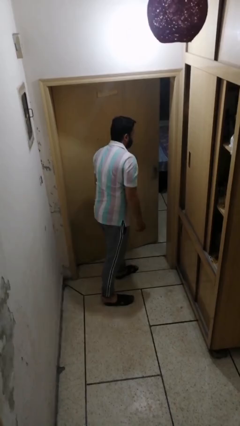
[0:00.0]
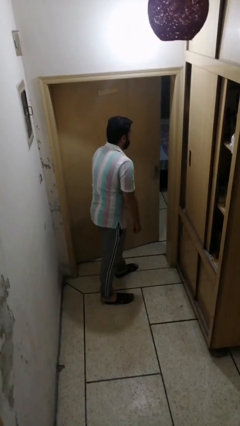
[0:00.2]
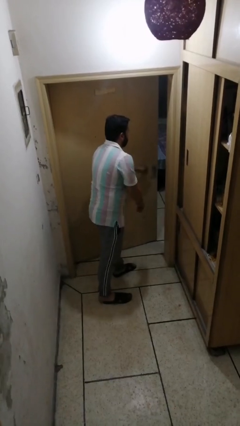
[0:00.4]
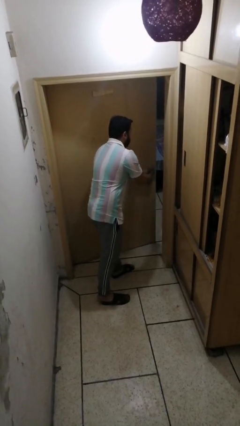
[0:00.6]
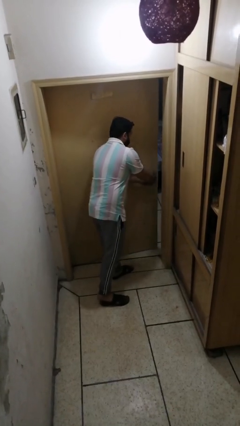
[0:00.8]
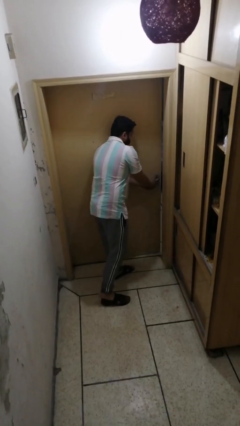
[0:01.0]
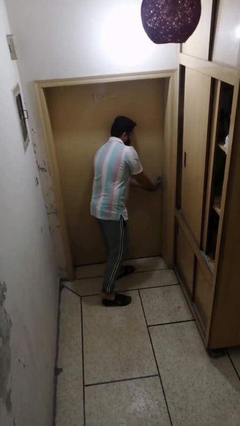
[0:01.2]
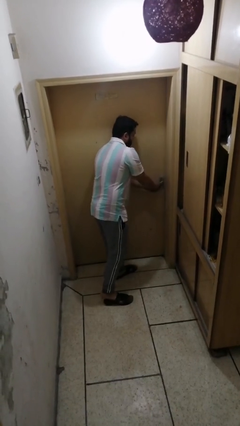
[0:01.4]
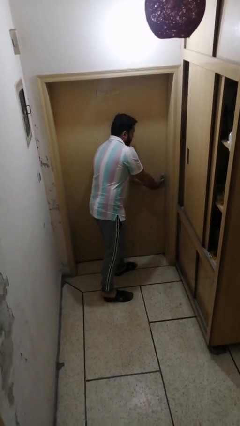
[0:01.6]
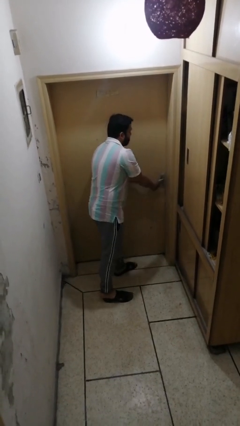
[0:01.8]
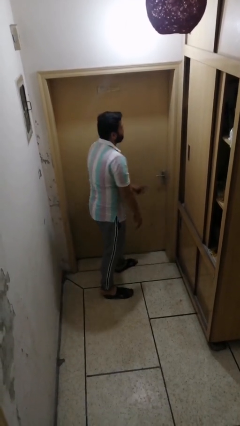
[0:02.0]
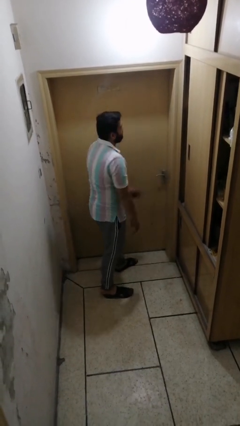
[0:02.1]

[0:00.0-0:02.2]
person closes facility door

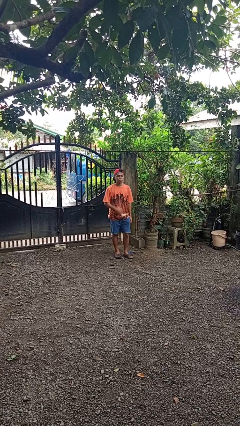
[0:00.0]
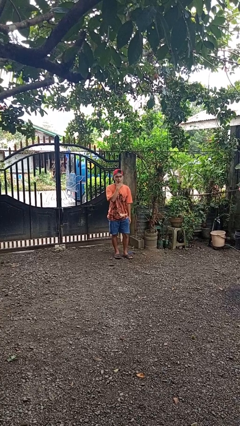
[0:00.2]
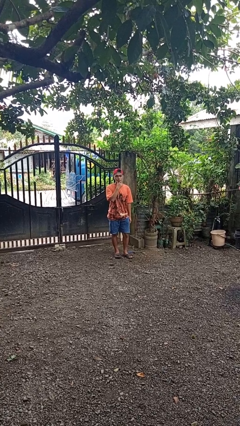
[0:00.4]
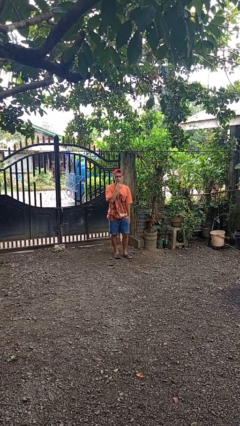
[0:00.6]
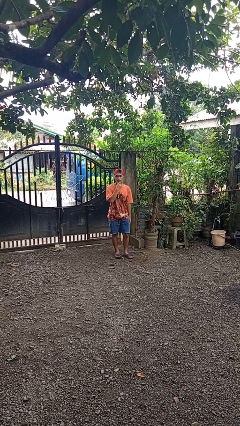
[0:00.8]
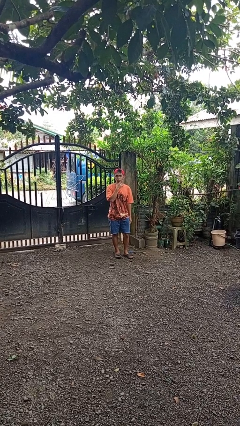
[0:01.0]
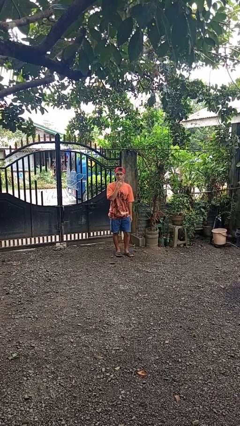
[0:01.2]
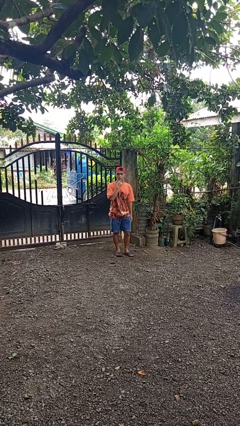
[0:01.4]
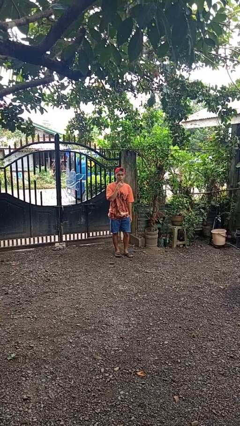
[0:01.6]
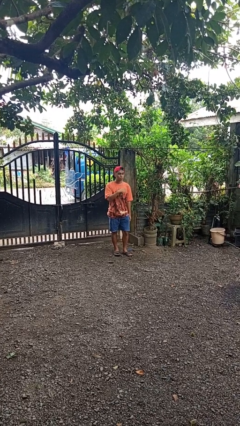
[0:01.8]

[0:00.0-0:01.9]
person strokes chin

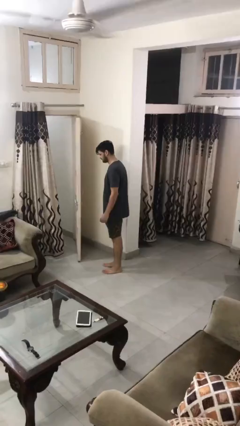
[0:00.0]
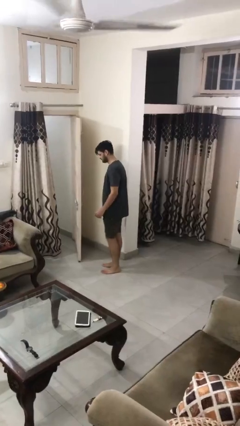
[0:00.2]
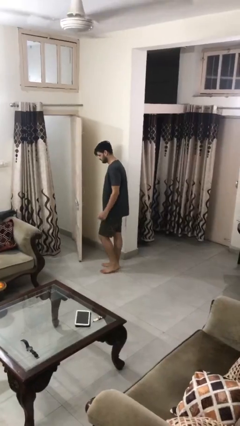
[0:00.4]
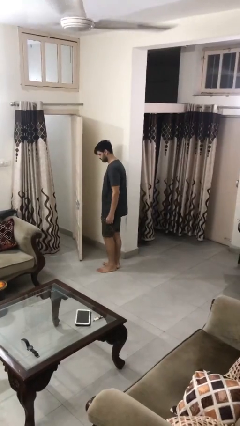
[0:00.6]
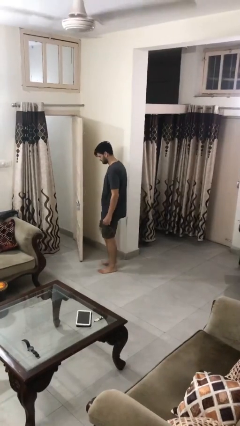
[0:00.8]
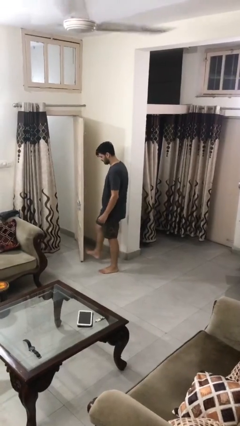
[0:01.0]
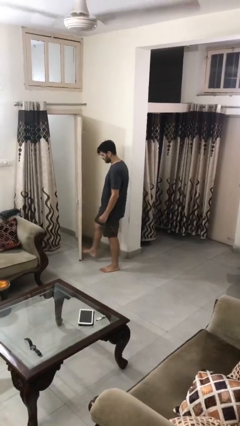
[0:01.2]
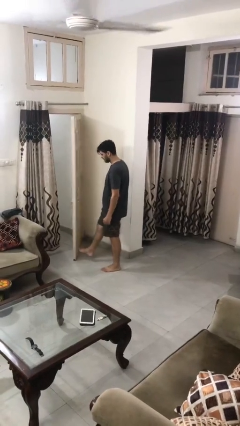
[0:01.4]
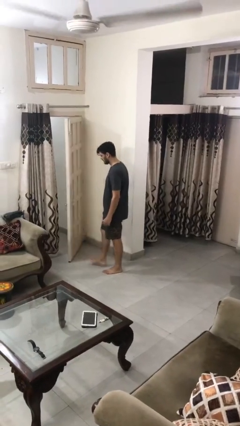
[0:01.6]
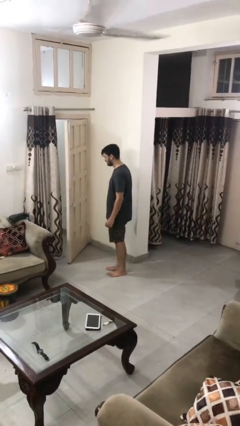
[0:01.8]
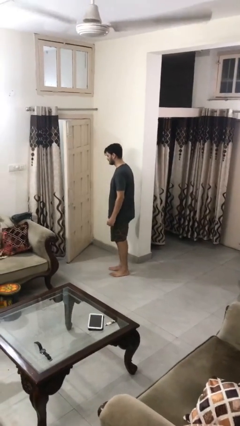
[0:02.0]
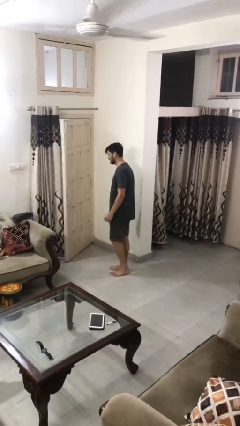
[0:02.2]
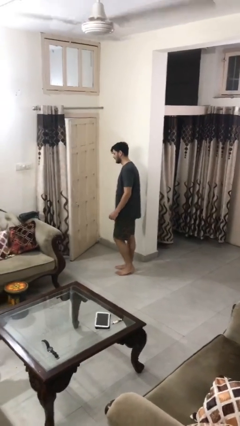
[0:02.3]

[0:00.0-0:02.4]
person closes door with foot

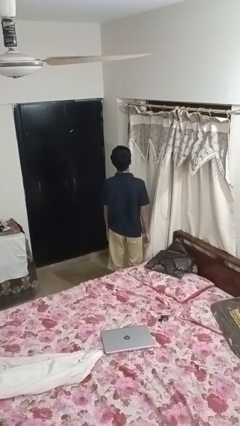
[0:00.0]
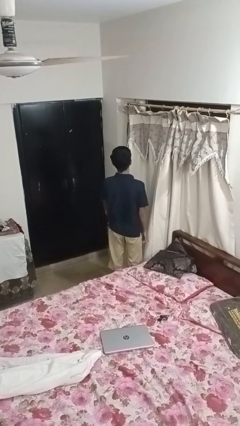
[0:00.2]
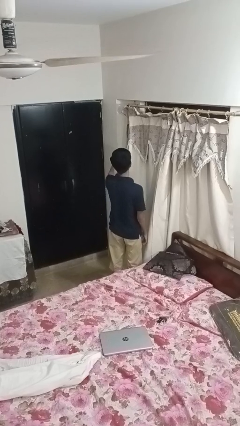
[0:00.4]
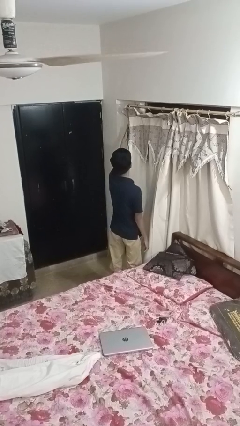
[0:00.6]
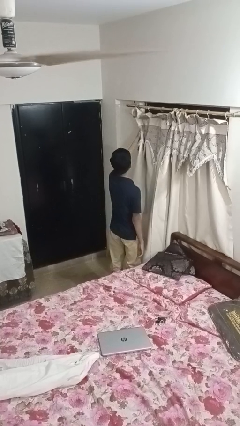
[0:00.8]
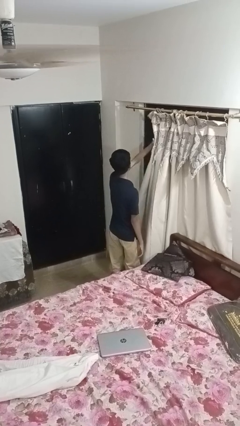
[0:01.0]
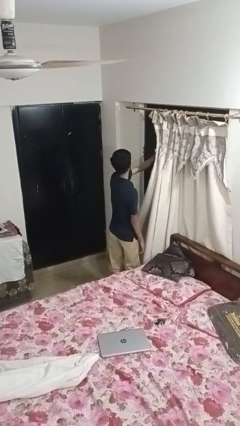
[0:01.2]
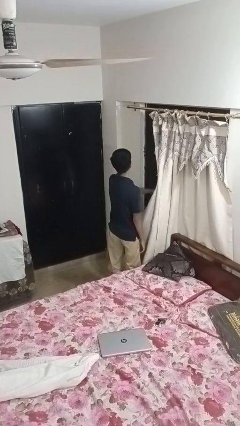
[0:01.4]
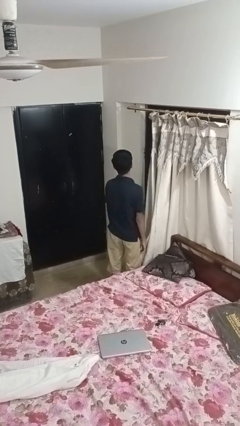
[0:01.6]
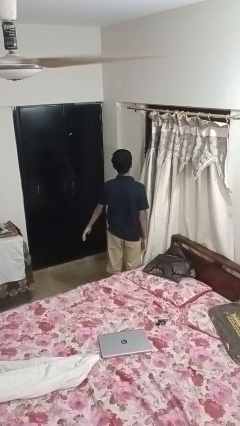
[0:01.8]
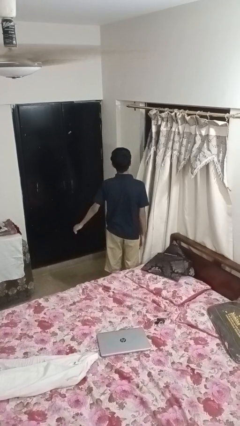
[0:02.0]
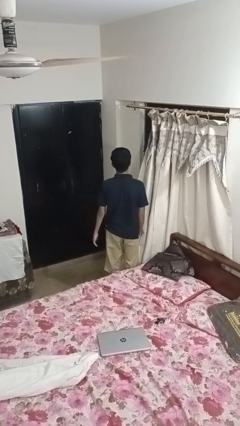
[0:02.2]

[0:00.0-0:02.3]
person opens curtains

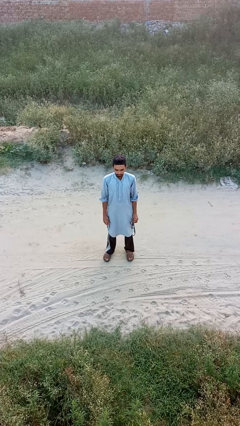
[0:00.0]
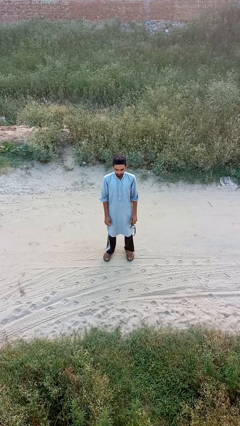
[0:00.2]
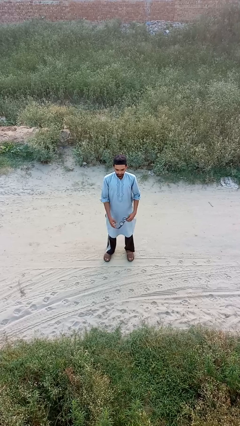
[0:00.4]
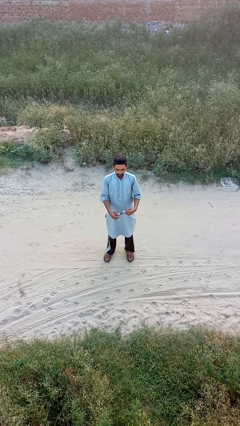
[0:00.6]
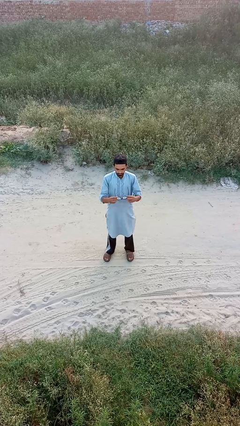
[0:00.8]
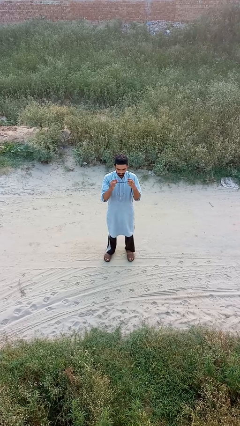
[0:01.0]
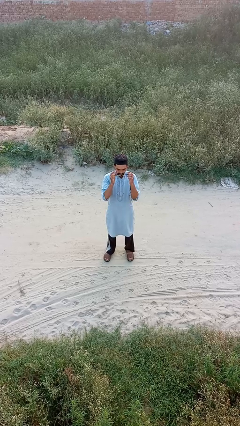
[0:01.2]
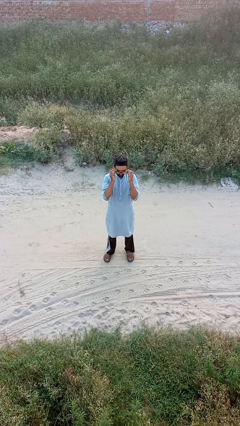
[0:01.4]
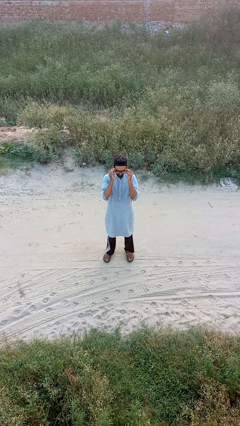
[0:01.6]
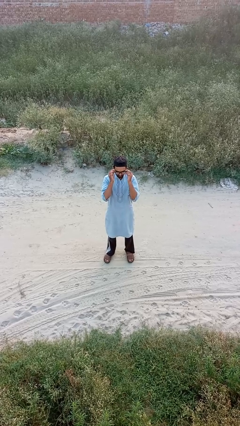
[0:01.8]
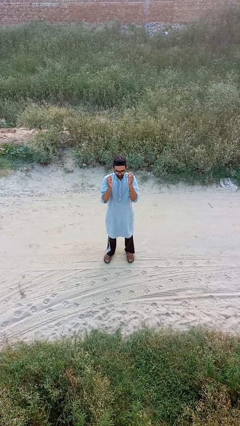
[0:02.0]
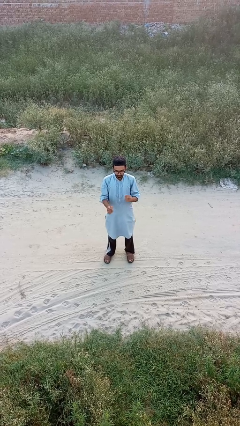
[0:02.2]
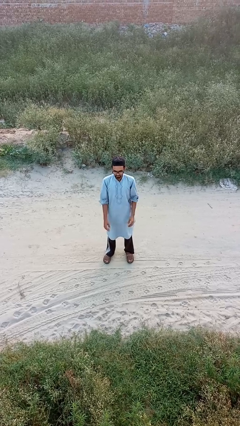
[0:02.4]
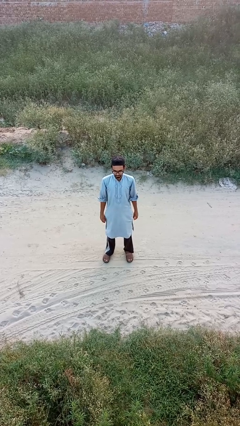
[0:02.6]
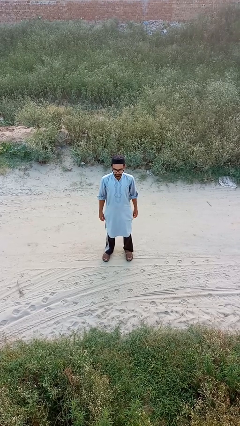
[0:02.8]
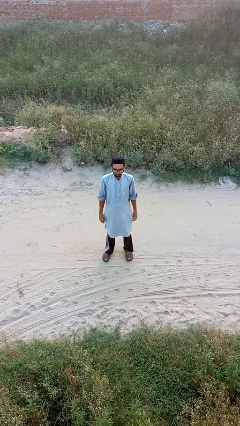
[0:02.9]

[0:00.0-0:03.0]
person puts on glasses

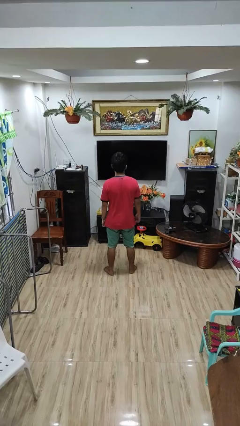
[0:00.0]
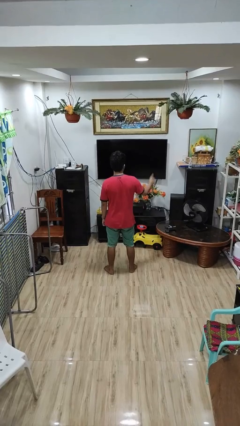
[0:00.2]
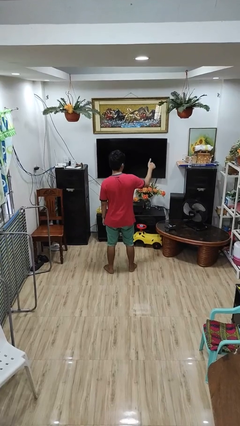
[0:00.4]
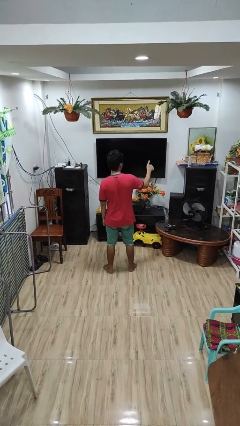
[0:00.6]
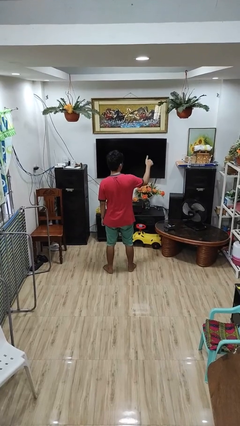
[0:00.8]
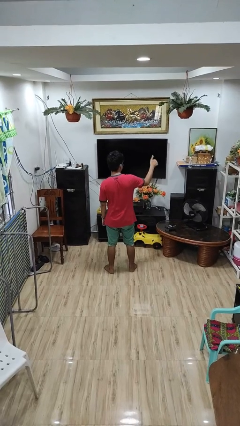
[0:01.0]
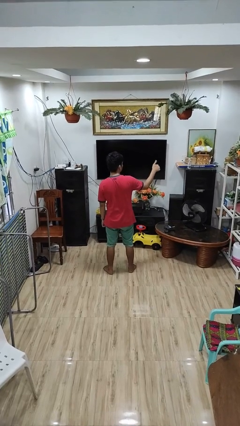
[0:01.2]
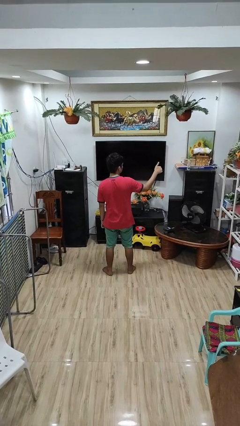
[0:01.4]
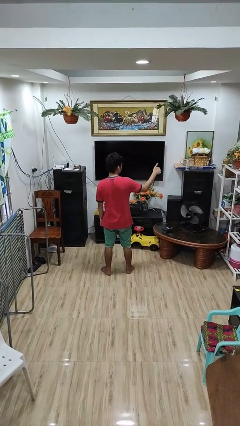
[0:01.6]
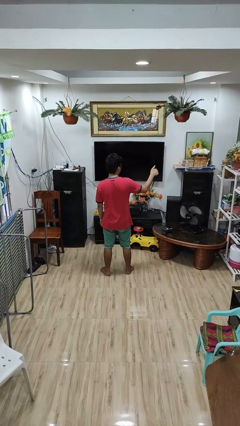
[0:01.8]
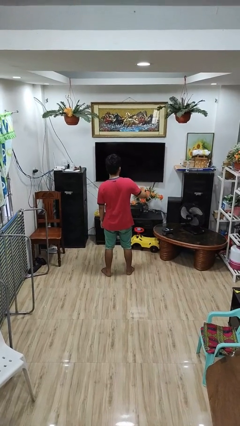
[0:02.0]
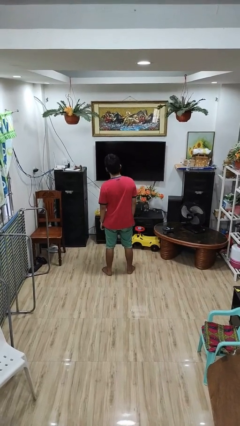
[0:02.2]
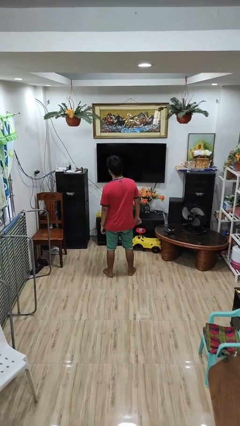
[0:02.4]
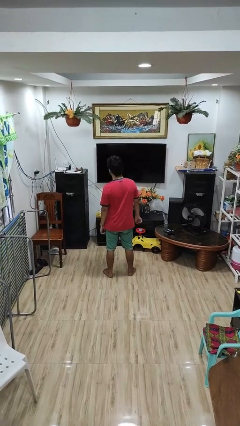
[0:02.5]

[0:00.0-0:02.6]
person gestures thumbs up

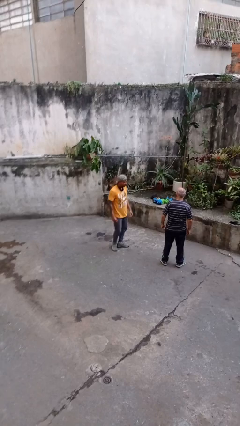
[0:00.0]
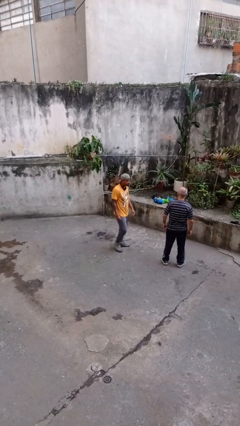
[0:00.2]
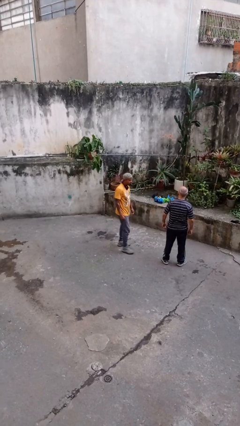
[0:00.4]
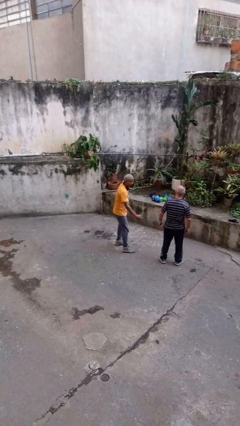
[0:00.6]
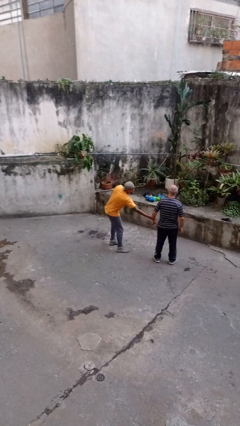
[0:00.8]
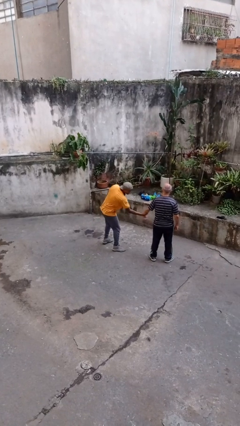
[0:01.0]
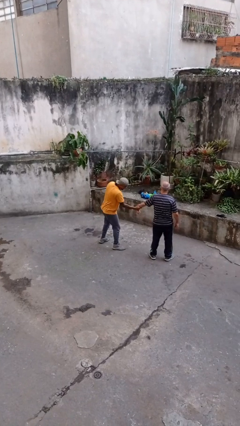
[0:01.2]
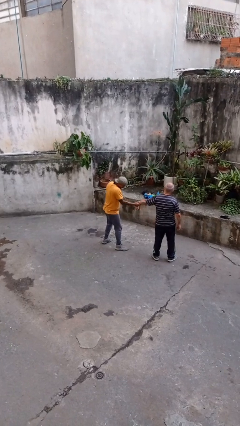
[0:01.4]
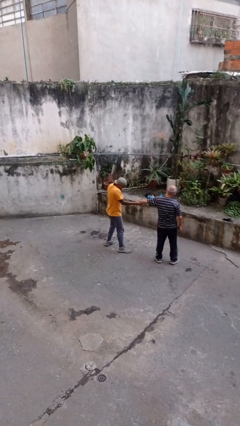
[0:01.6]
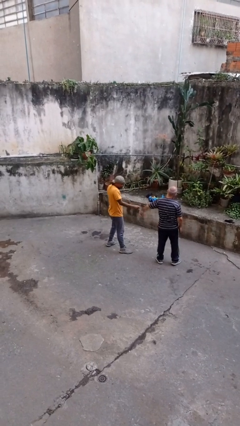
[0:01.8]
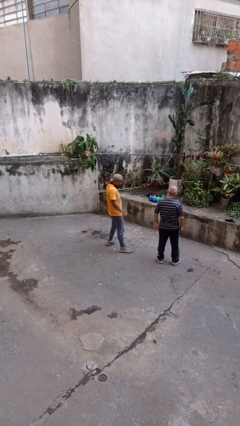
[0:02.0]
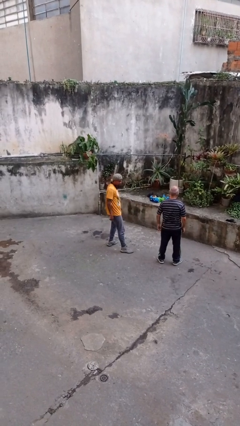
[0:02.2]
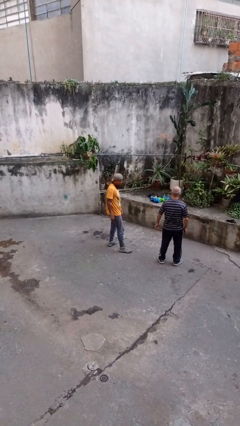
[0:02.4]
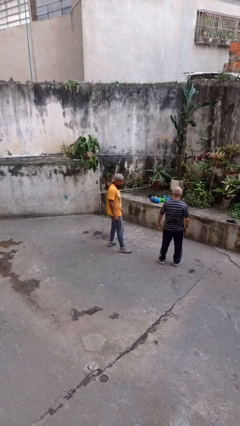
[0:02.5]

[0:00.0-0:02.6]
person grabs person by forearm
